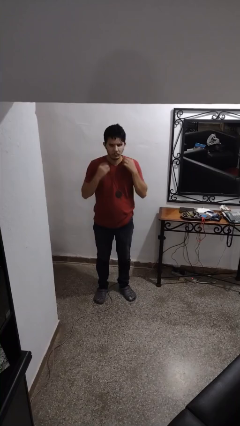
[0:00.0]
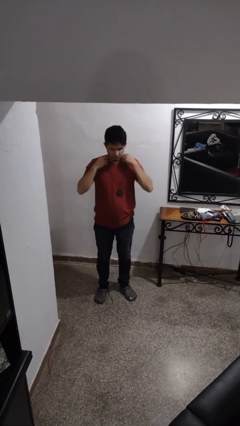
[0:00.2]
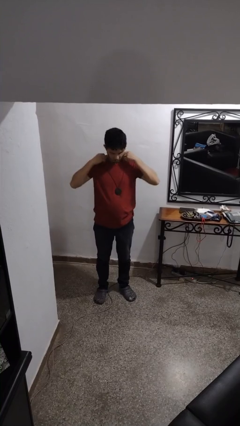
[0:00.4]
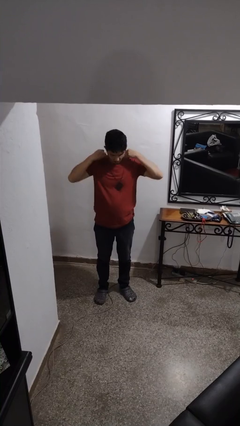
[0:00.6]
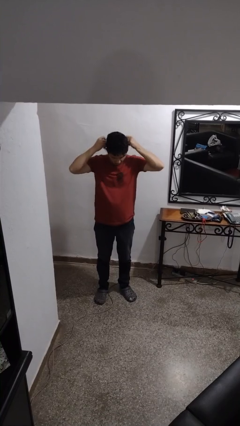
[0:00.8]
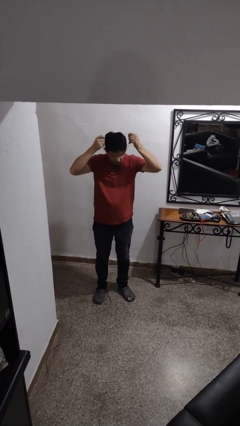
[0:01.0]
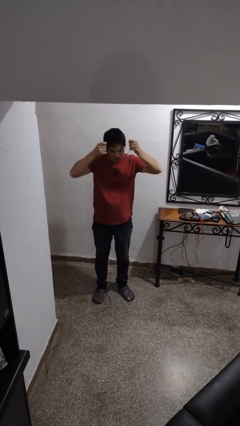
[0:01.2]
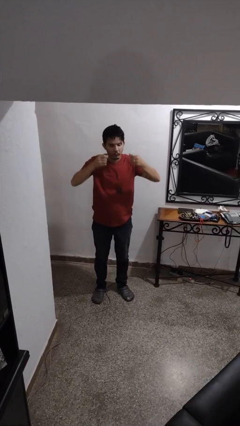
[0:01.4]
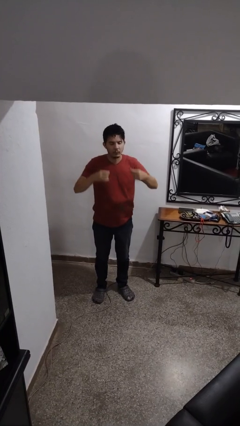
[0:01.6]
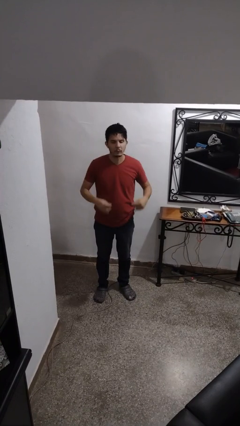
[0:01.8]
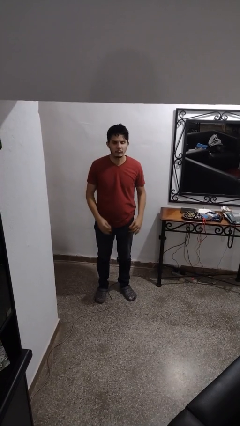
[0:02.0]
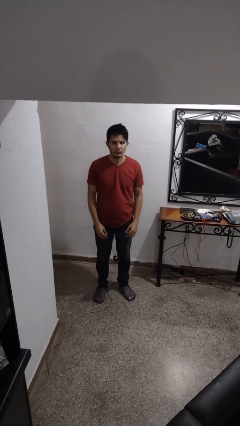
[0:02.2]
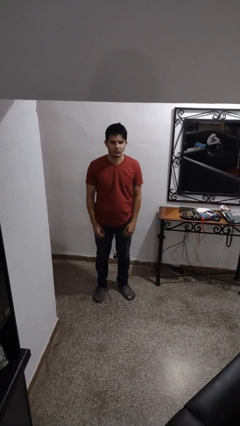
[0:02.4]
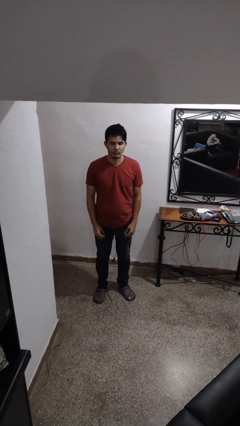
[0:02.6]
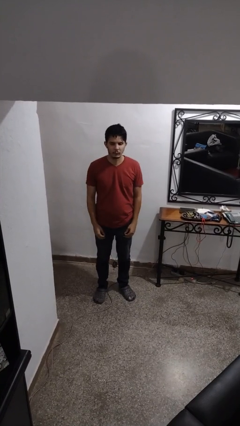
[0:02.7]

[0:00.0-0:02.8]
person takes off necklace

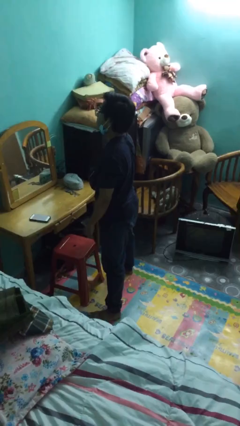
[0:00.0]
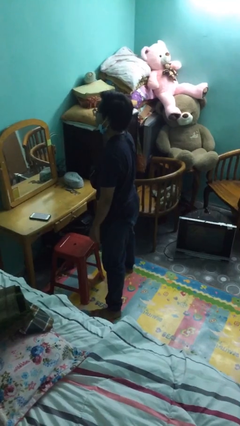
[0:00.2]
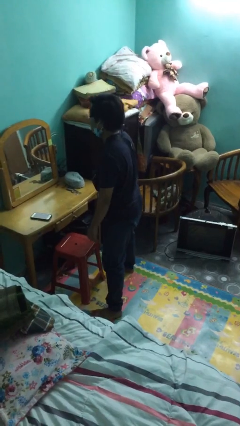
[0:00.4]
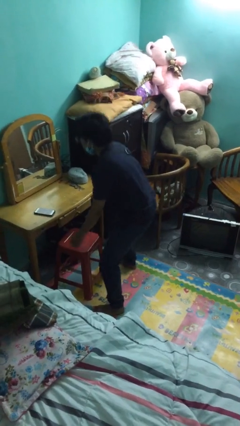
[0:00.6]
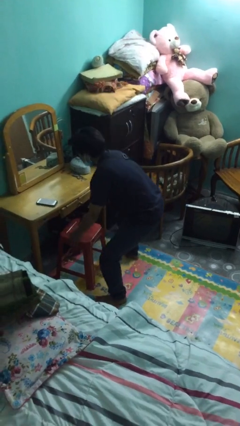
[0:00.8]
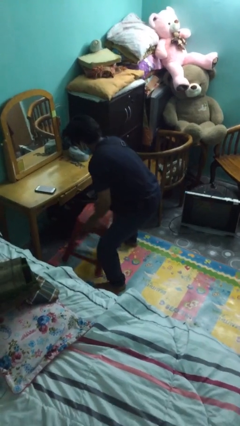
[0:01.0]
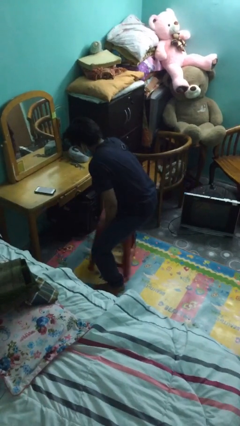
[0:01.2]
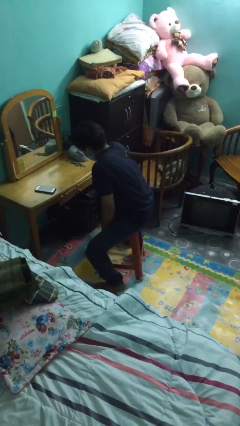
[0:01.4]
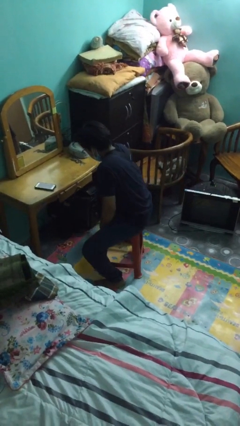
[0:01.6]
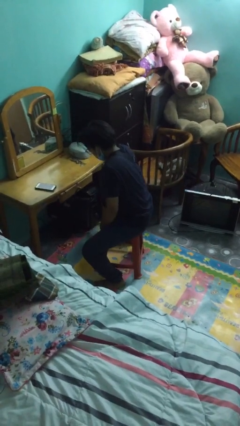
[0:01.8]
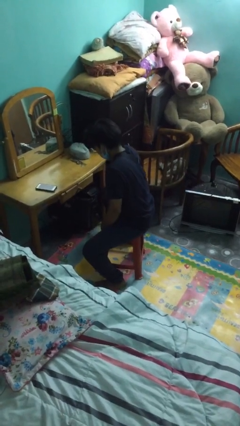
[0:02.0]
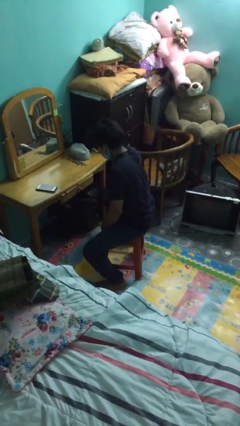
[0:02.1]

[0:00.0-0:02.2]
person sits down

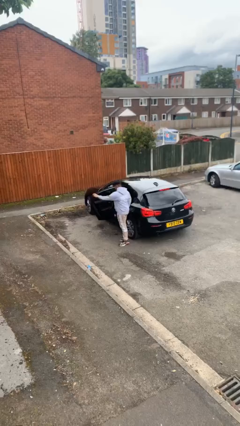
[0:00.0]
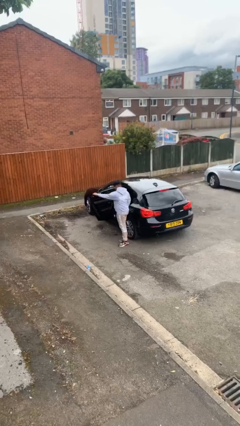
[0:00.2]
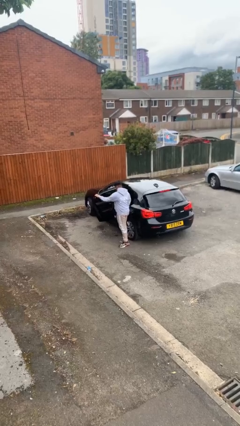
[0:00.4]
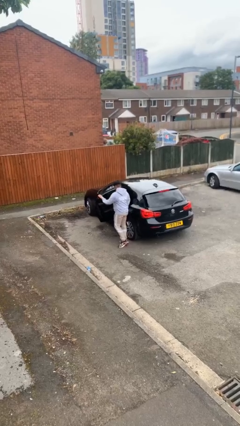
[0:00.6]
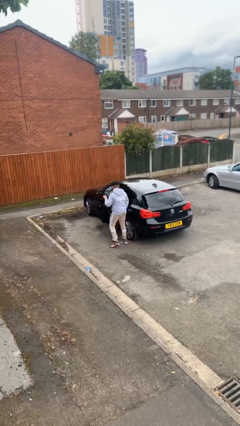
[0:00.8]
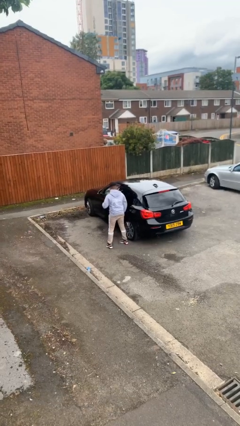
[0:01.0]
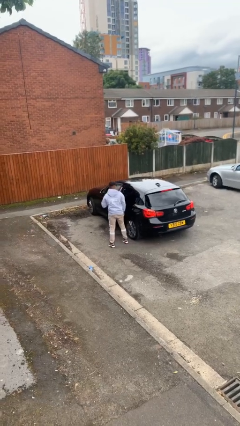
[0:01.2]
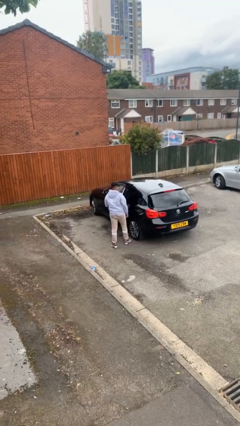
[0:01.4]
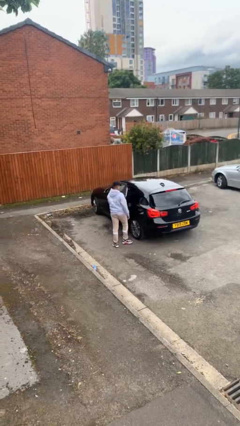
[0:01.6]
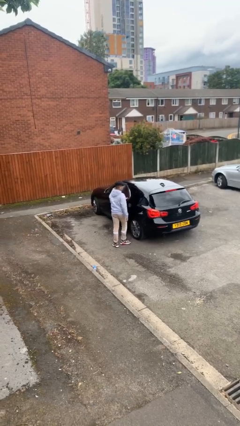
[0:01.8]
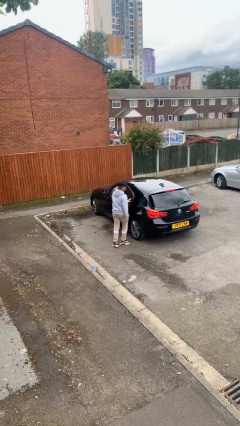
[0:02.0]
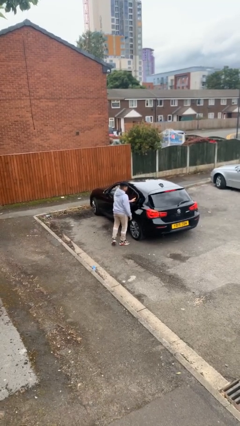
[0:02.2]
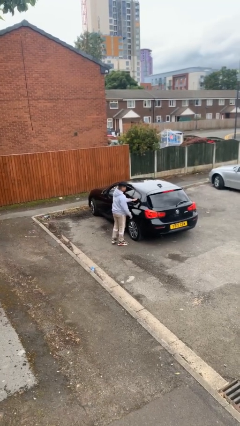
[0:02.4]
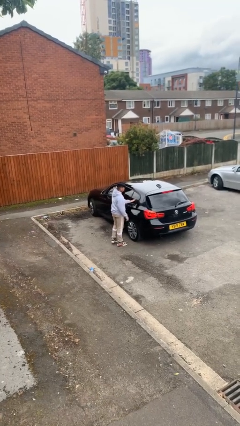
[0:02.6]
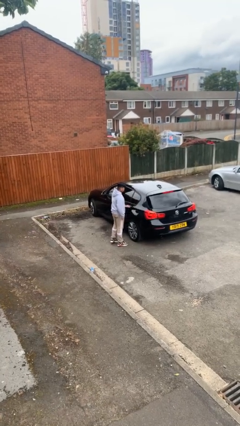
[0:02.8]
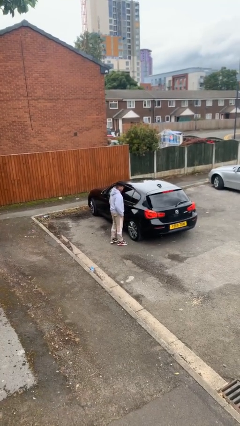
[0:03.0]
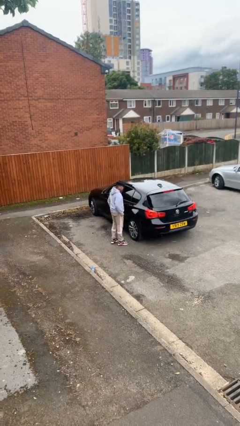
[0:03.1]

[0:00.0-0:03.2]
person closes car door

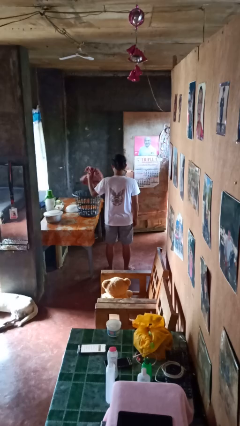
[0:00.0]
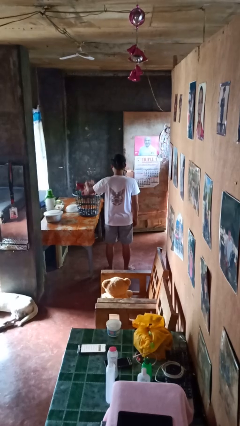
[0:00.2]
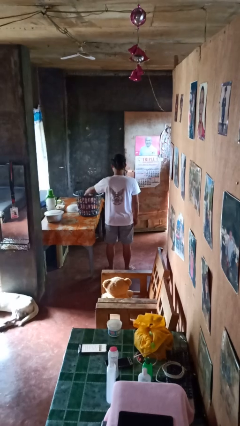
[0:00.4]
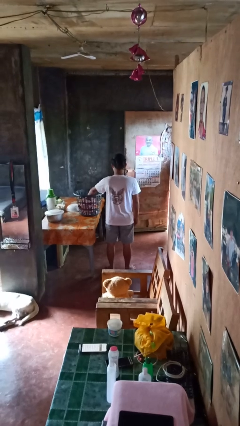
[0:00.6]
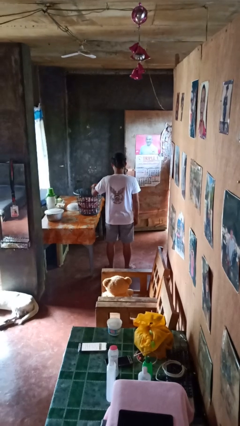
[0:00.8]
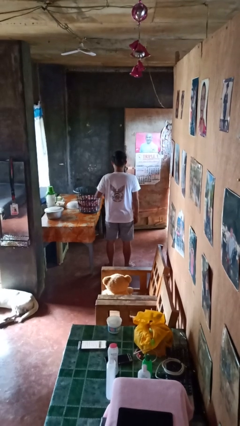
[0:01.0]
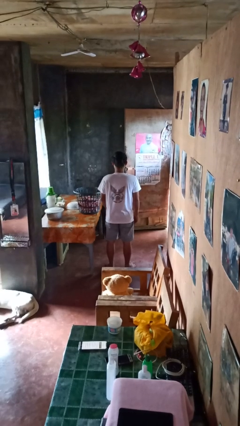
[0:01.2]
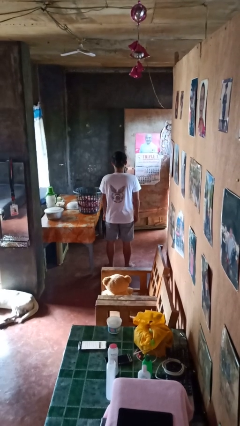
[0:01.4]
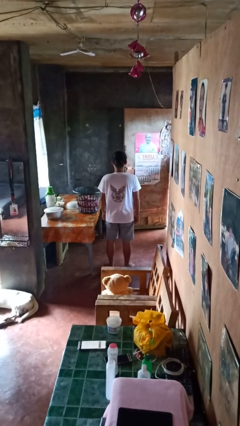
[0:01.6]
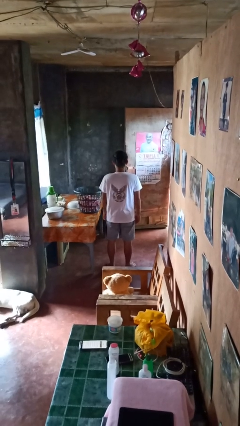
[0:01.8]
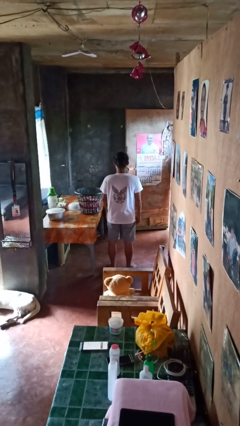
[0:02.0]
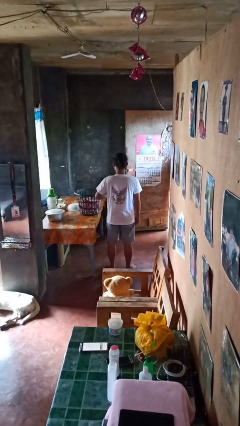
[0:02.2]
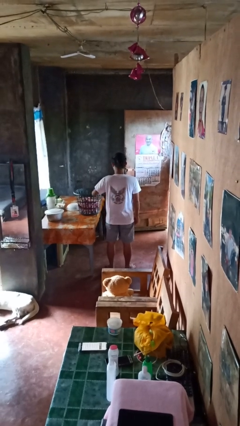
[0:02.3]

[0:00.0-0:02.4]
person puts object into basket

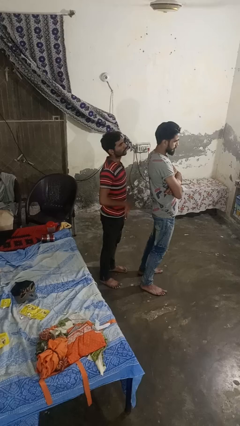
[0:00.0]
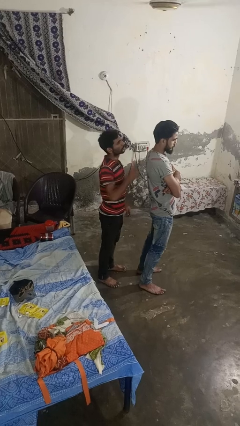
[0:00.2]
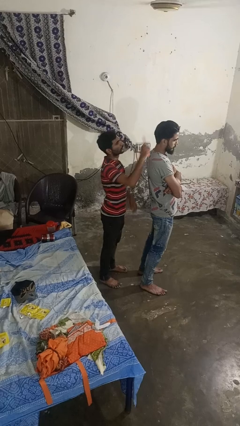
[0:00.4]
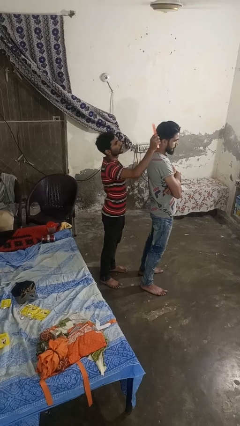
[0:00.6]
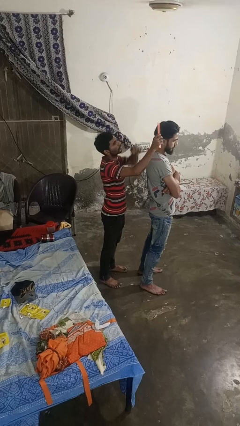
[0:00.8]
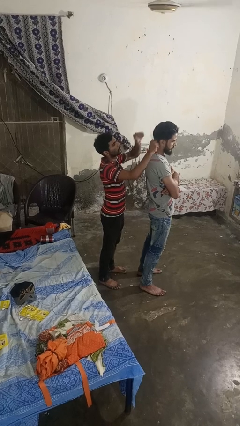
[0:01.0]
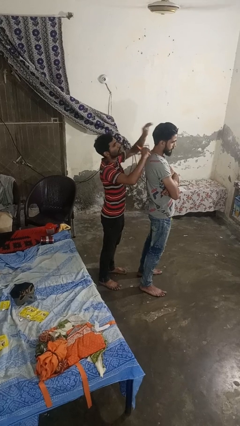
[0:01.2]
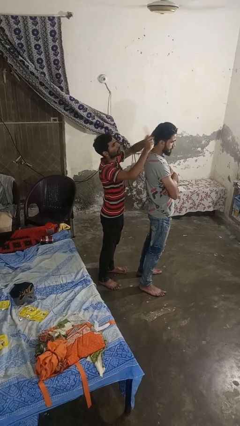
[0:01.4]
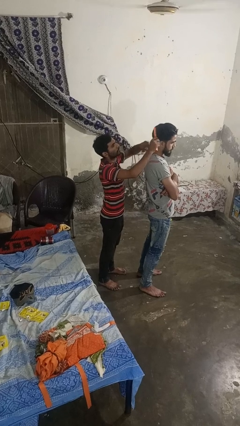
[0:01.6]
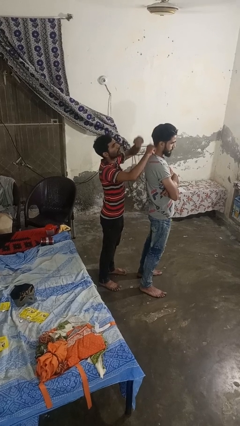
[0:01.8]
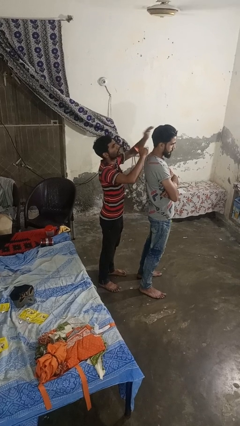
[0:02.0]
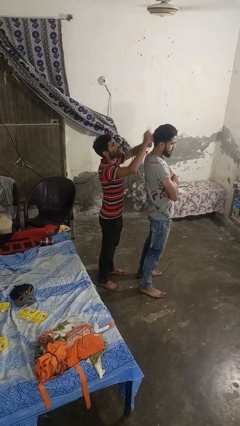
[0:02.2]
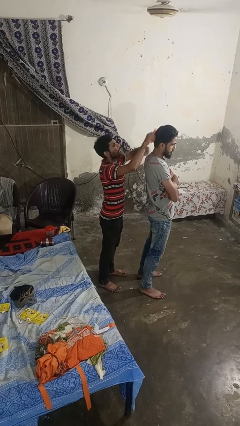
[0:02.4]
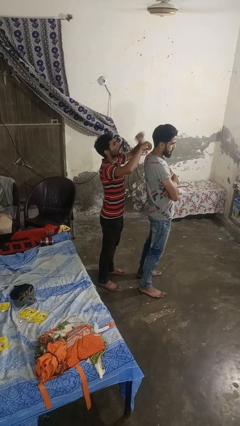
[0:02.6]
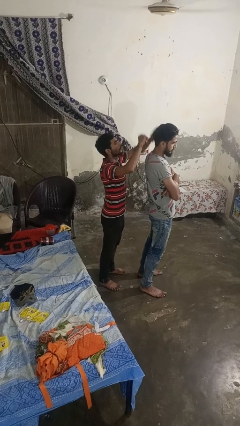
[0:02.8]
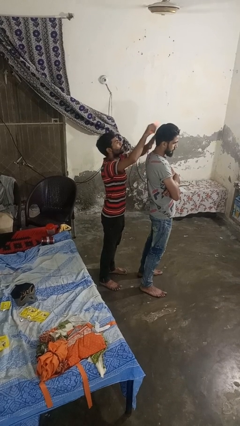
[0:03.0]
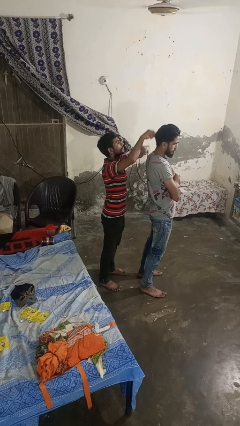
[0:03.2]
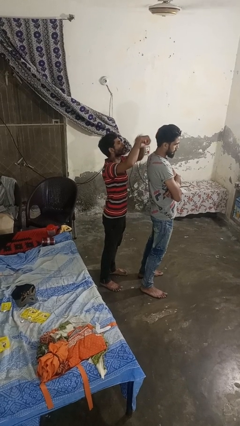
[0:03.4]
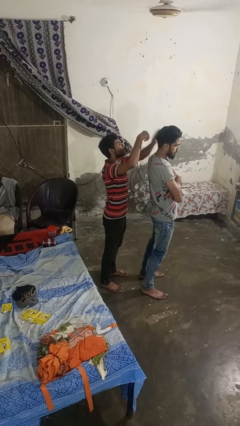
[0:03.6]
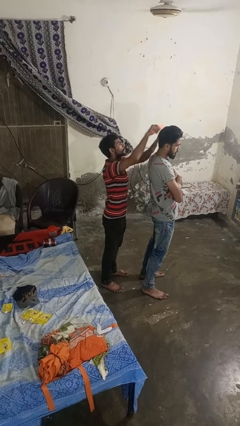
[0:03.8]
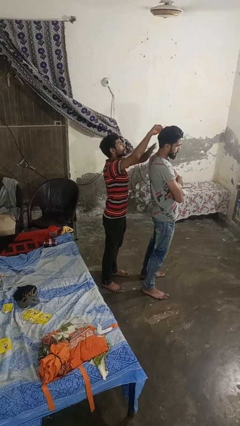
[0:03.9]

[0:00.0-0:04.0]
person brushes hair of person

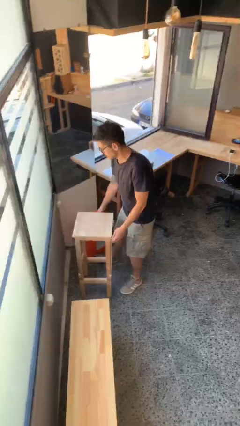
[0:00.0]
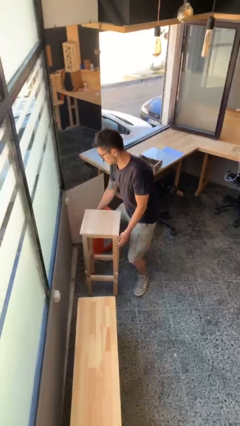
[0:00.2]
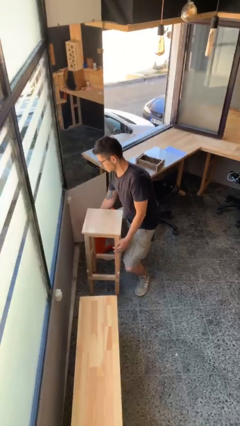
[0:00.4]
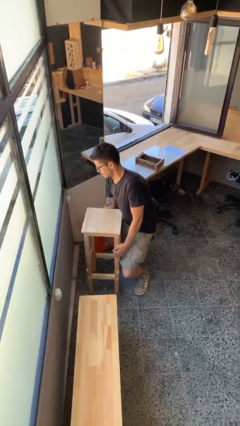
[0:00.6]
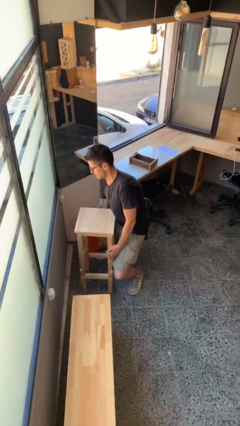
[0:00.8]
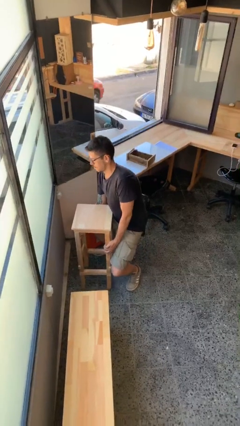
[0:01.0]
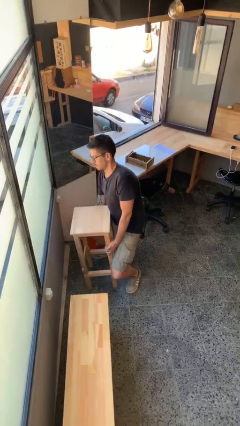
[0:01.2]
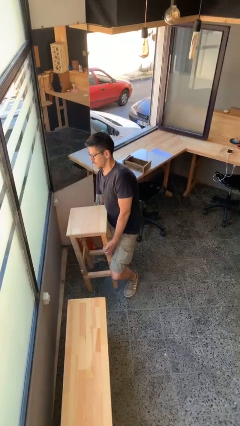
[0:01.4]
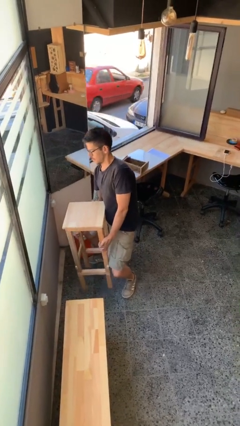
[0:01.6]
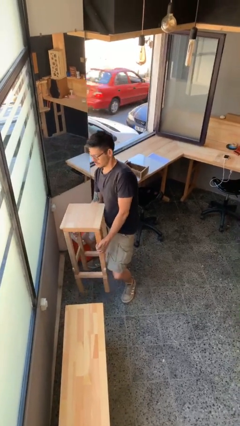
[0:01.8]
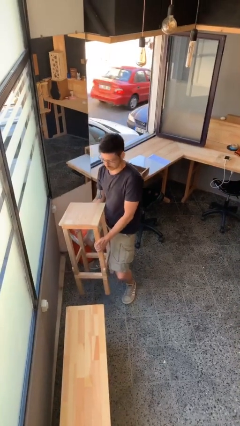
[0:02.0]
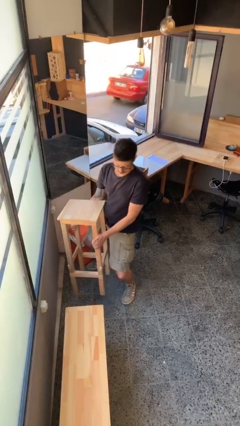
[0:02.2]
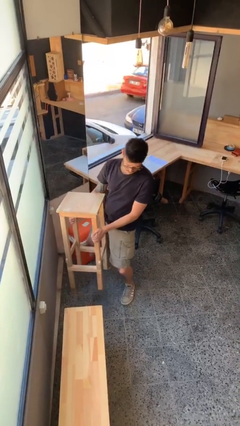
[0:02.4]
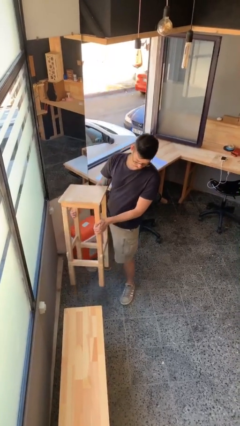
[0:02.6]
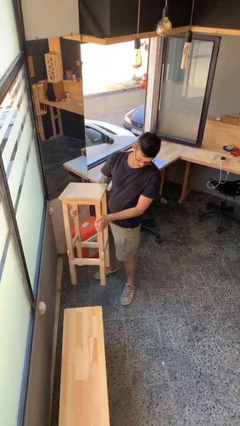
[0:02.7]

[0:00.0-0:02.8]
person picks up object from floor
